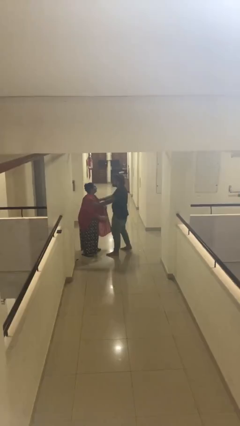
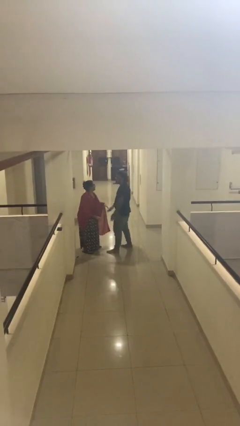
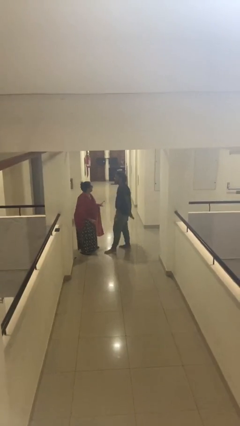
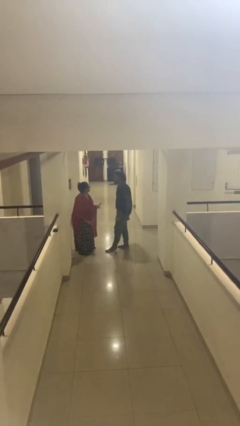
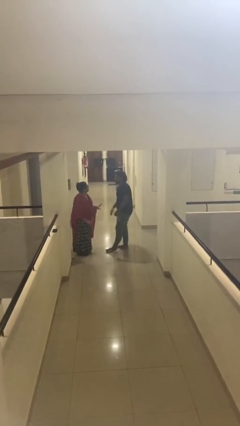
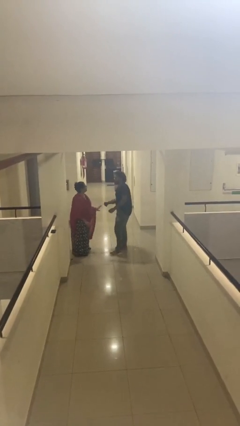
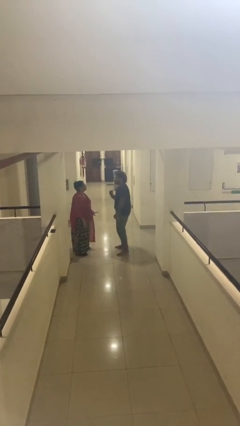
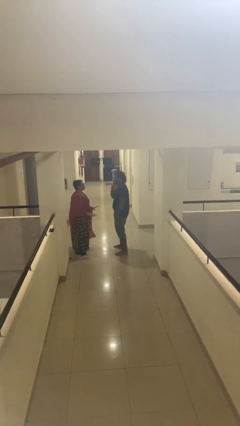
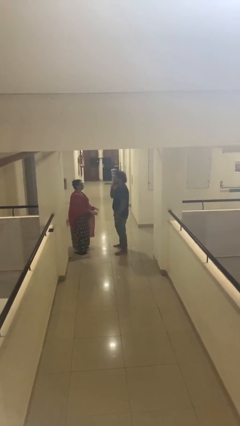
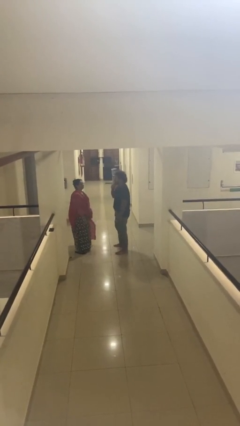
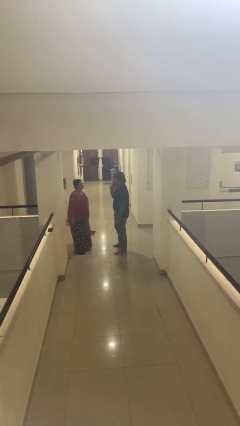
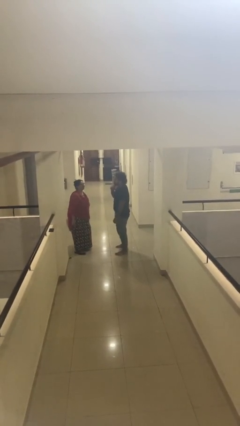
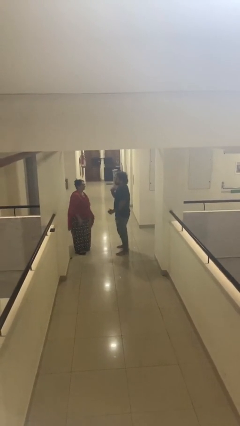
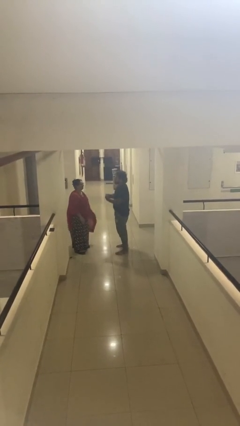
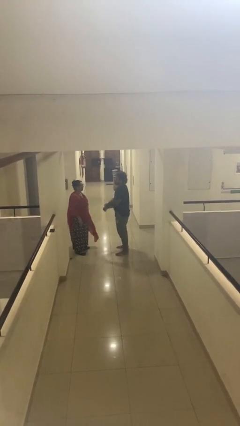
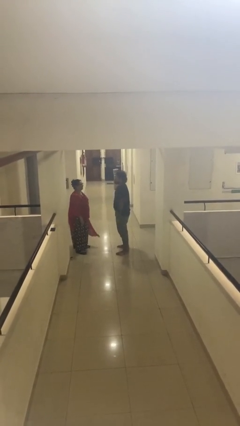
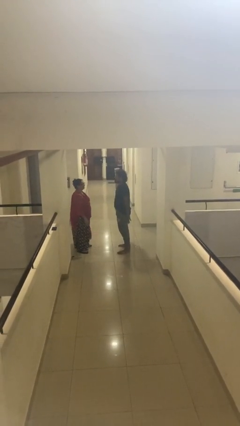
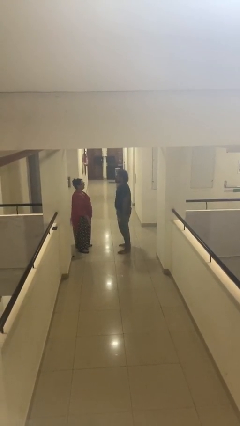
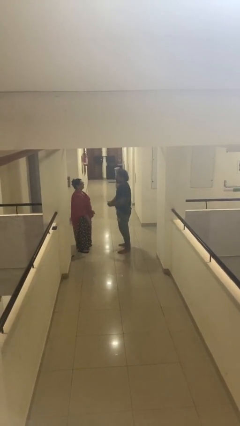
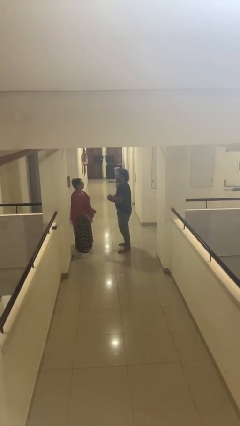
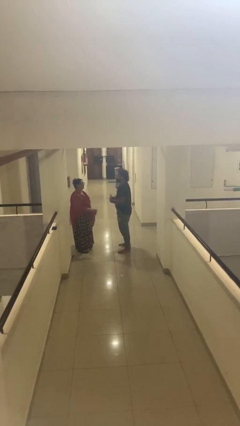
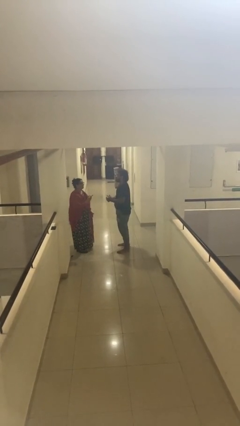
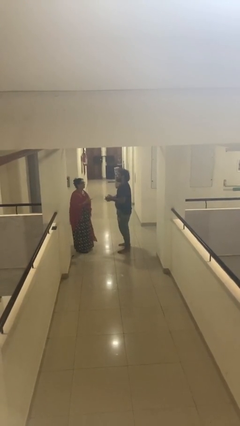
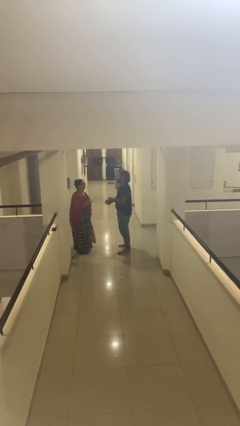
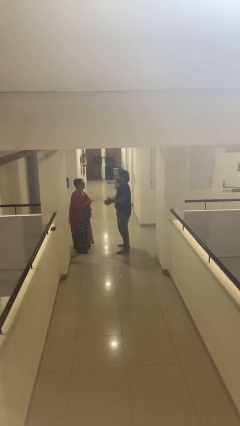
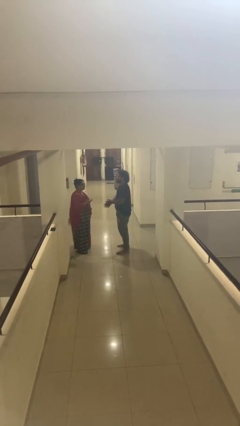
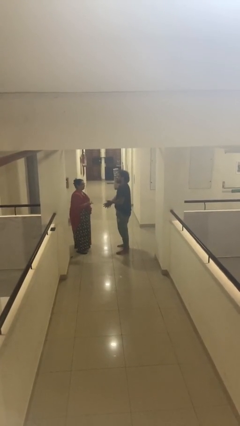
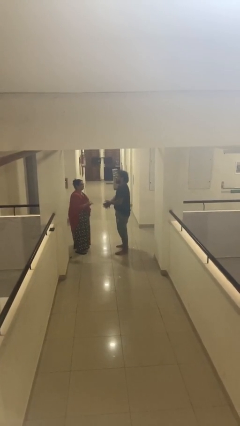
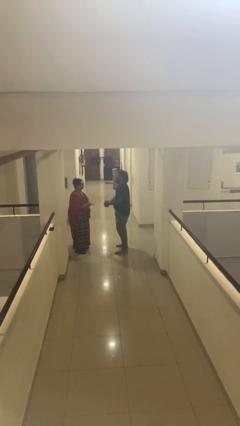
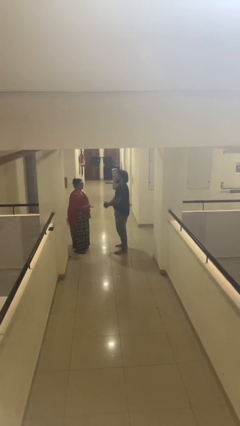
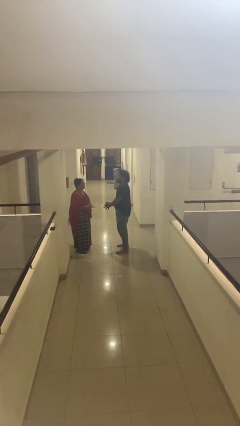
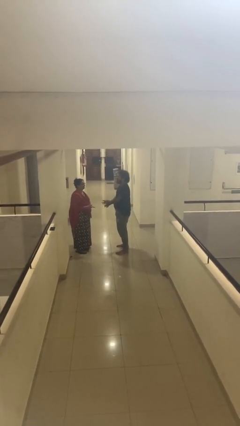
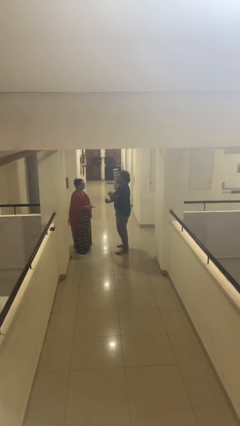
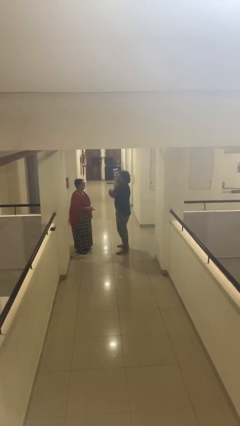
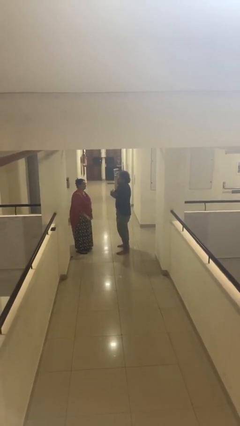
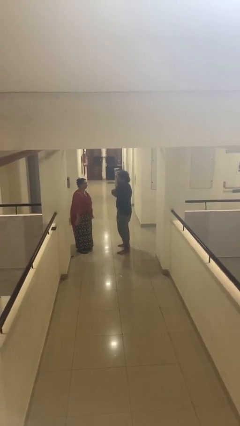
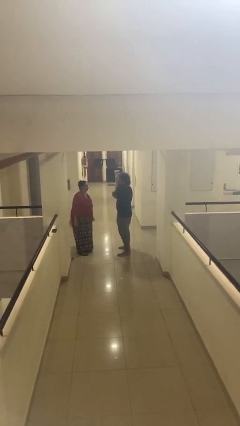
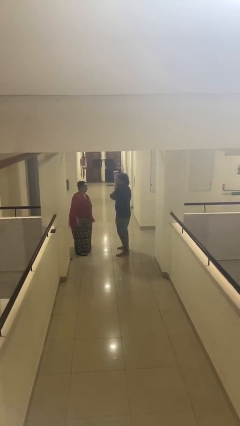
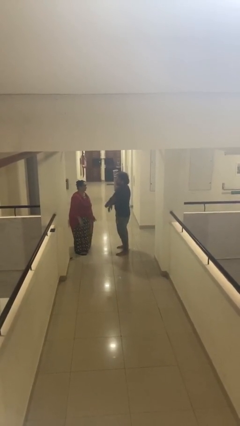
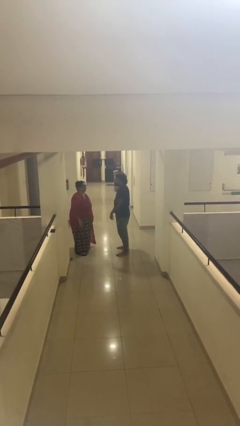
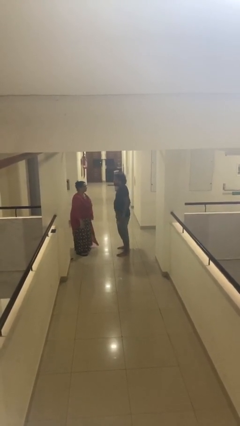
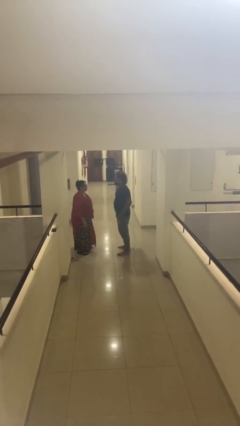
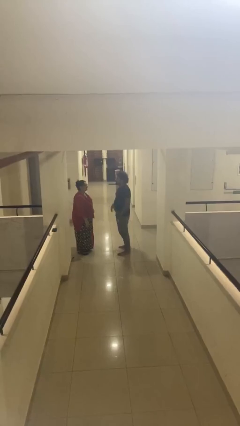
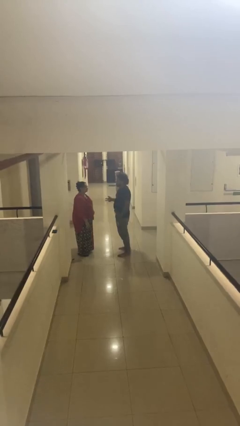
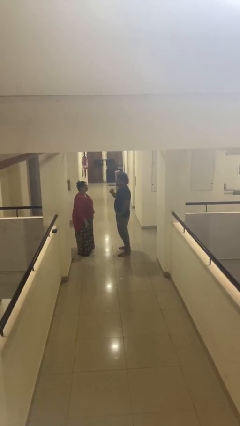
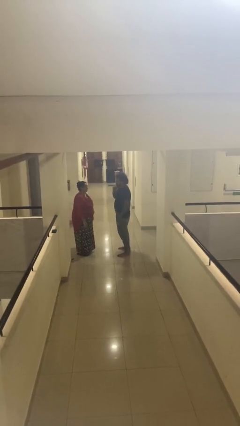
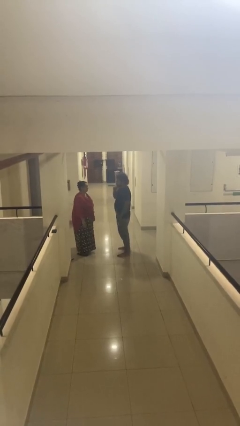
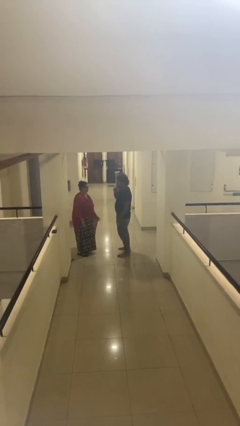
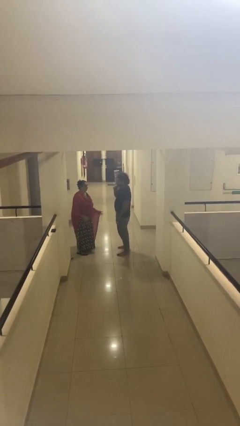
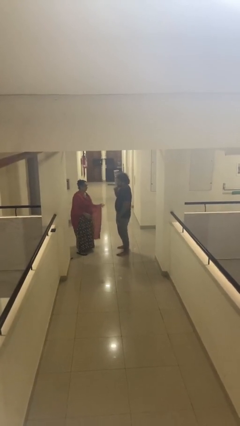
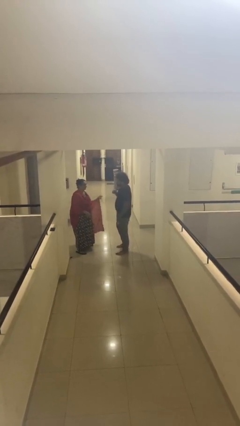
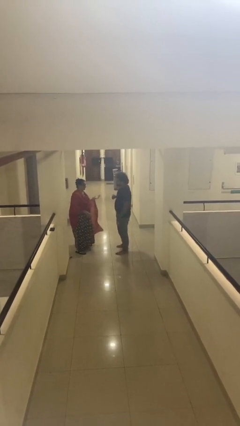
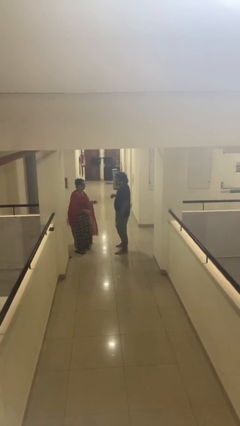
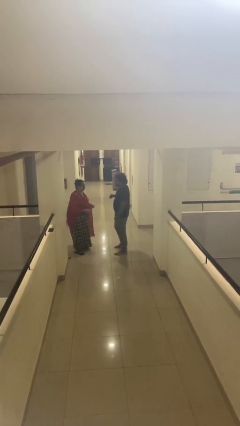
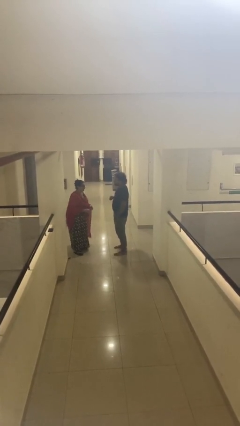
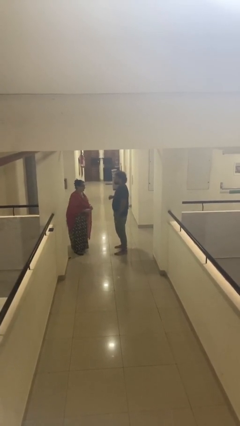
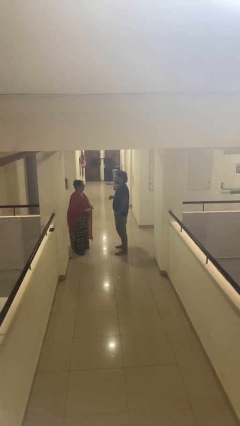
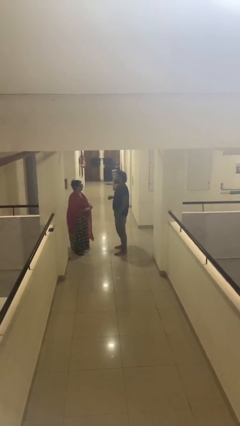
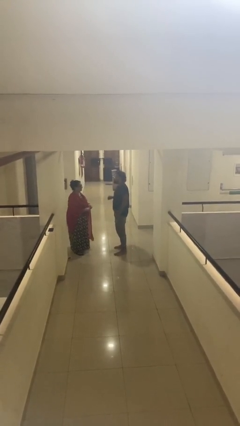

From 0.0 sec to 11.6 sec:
person talks to person

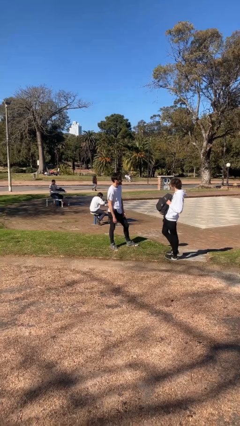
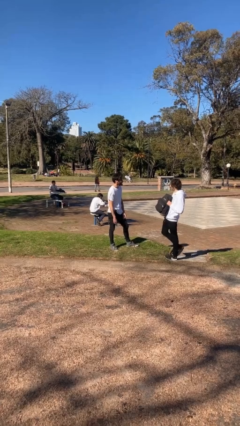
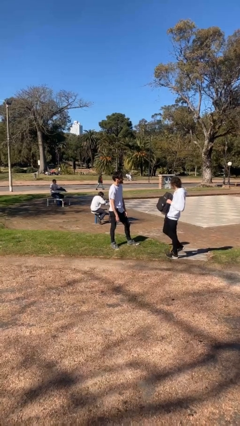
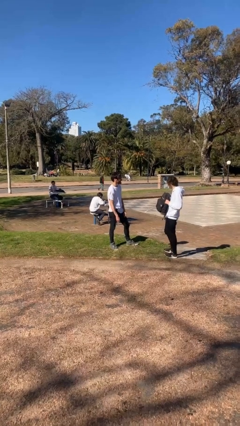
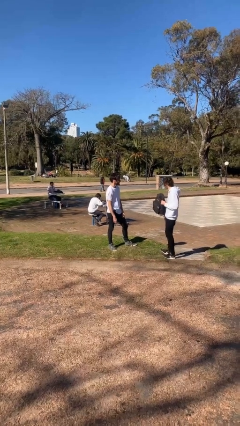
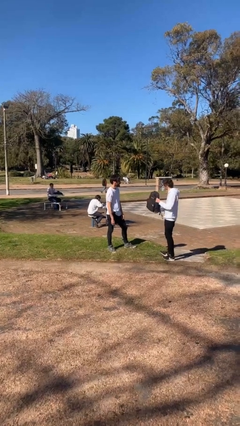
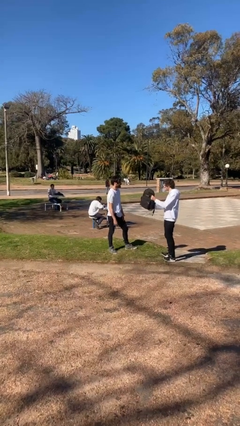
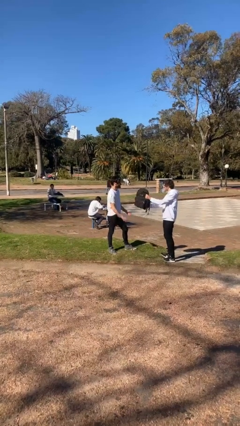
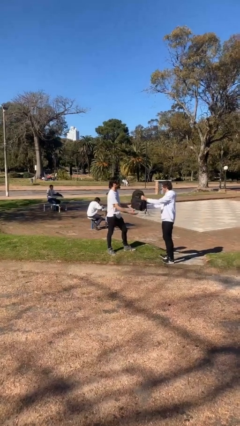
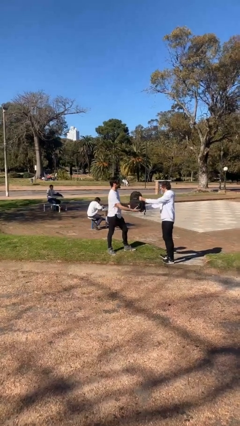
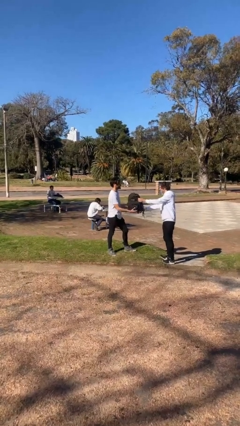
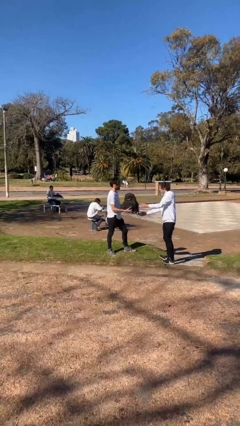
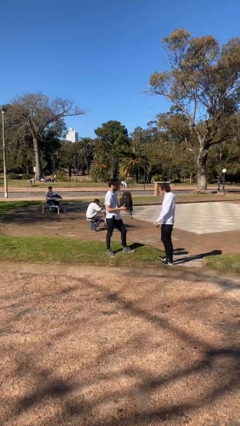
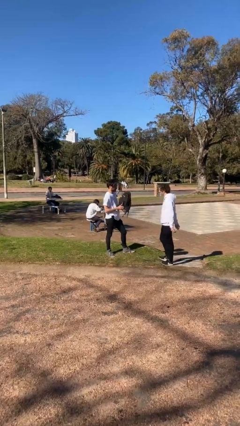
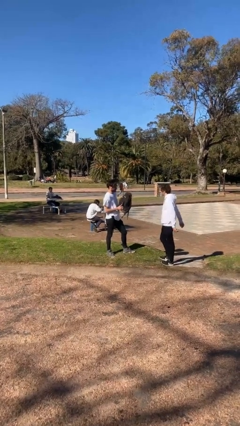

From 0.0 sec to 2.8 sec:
person transfers object to person

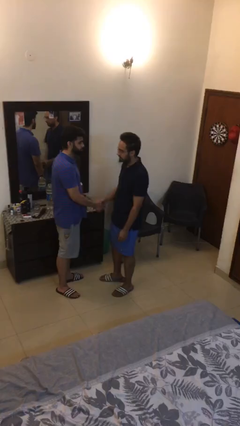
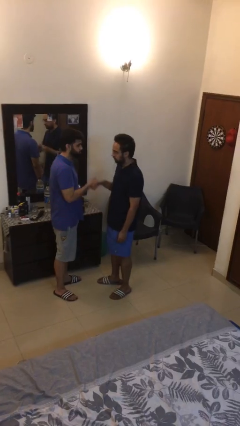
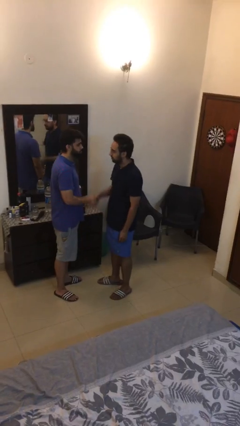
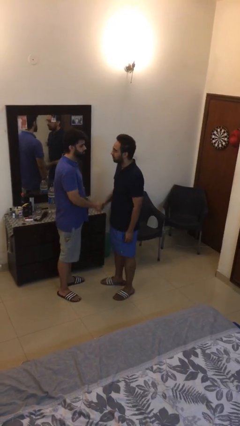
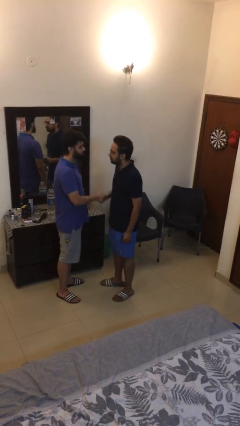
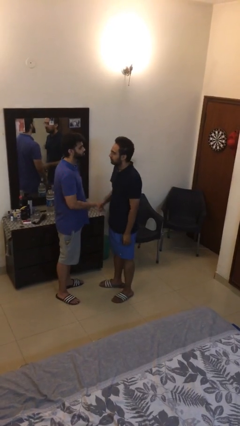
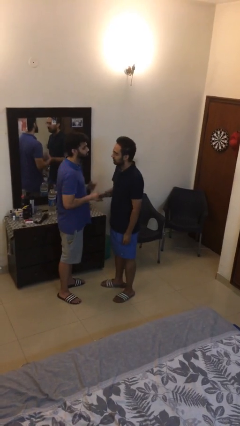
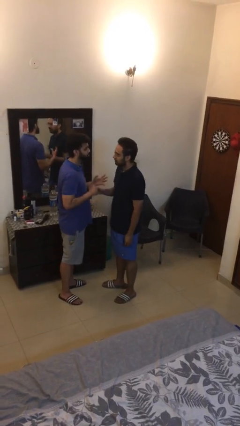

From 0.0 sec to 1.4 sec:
person shakes hand

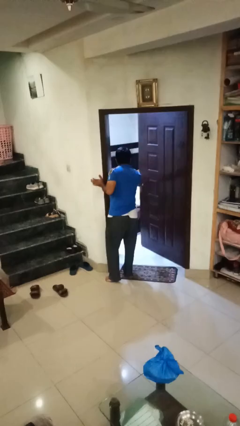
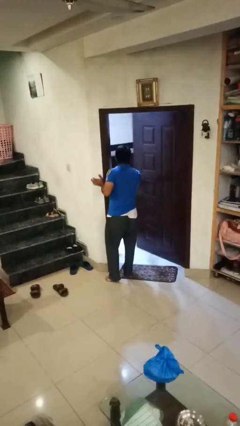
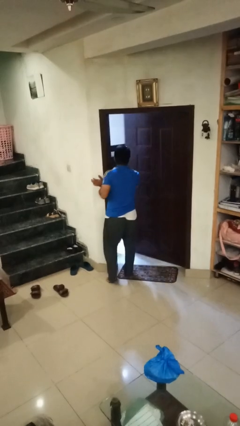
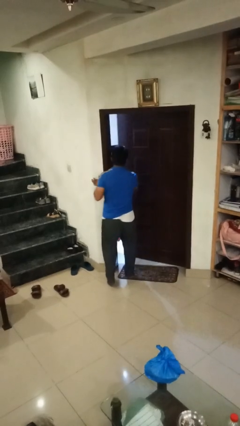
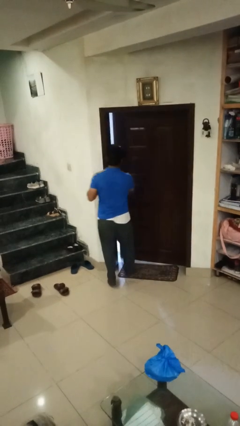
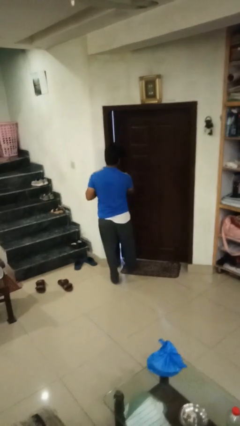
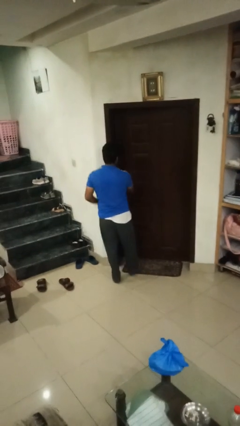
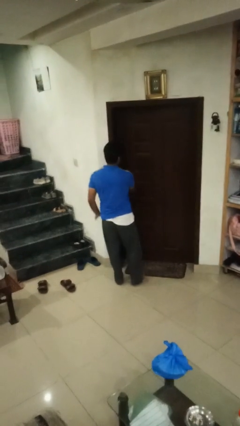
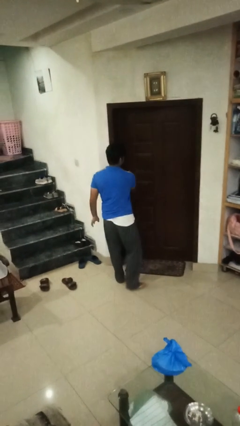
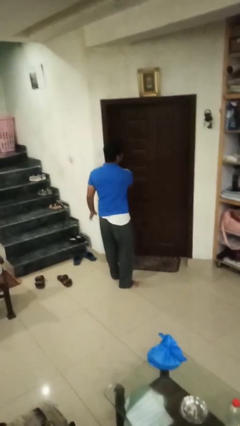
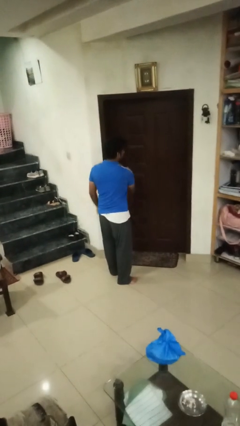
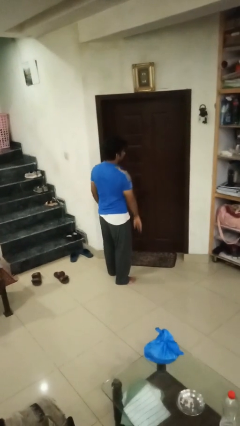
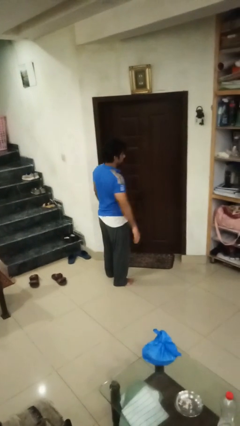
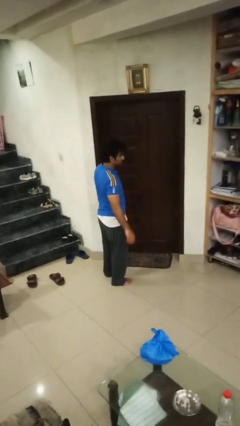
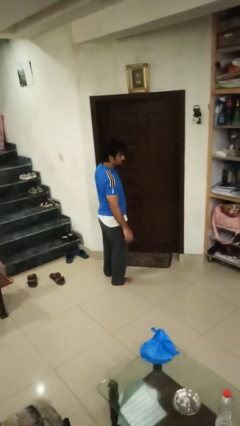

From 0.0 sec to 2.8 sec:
person closes facility door
